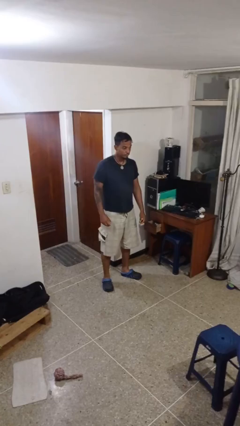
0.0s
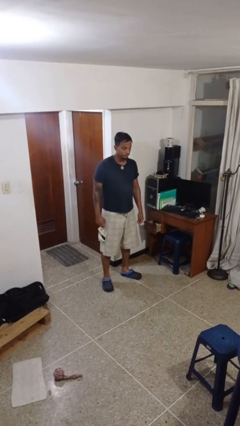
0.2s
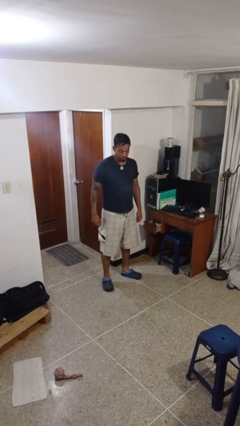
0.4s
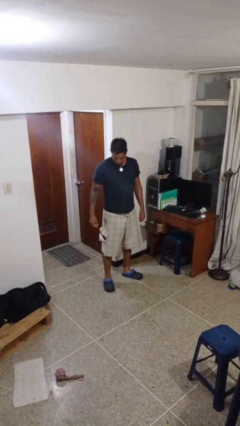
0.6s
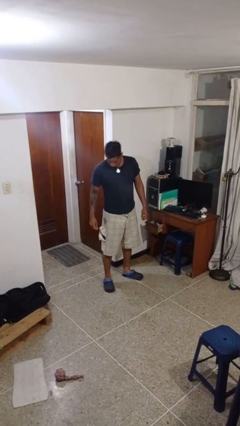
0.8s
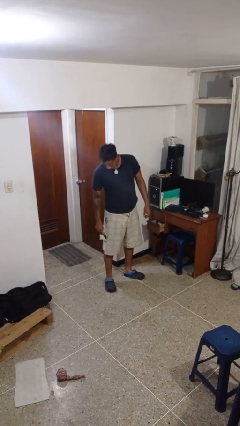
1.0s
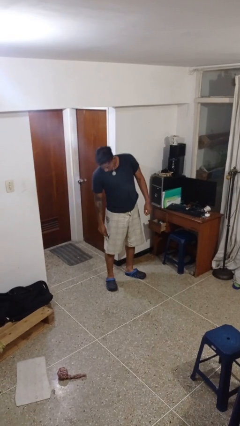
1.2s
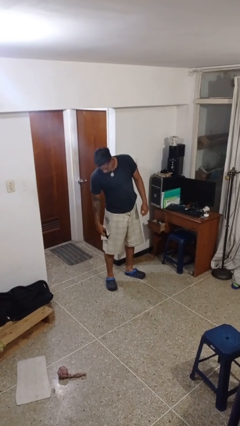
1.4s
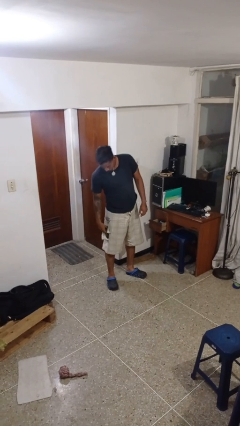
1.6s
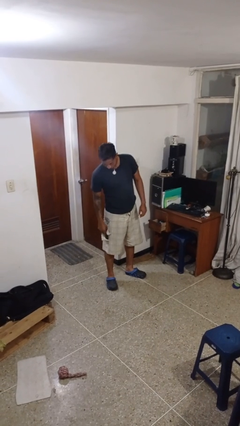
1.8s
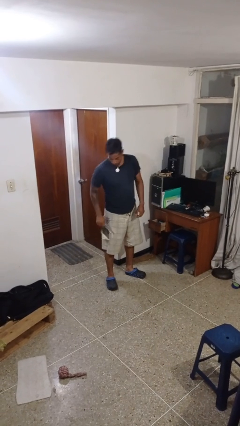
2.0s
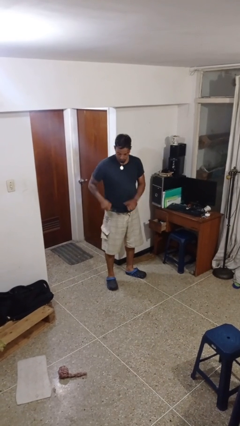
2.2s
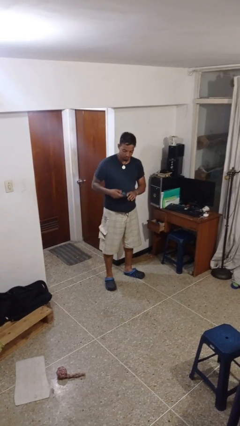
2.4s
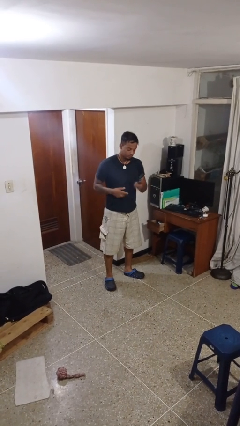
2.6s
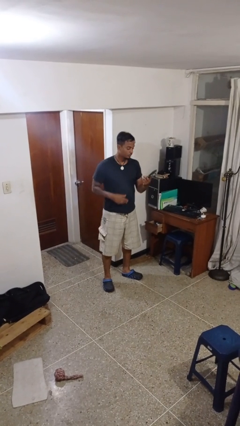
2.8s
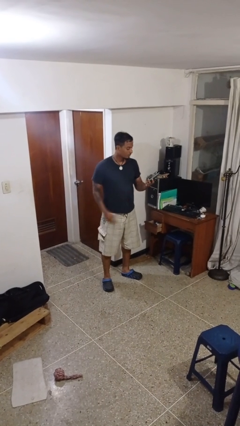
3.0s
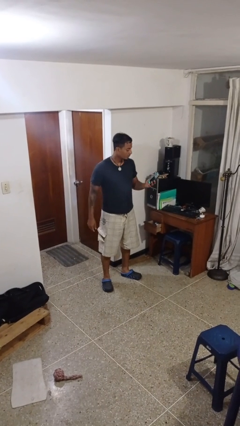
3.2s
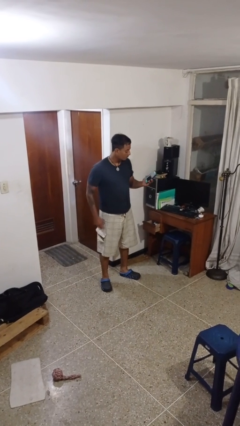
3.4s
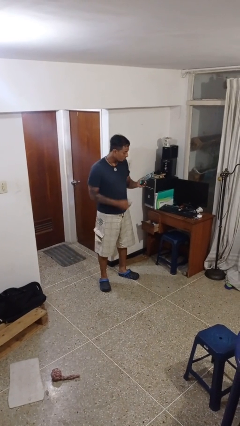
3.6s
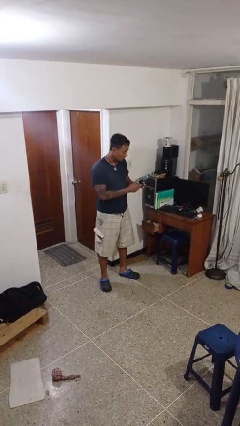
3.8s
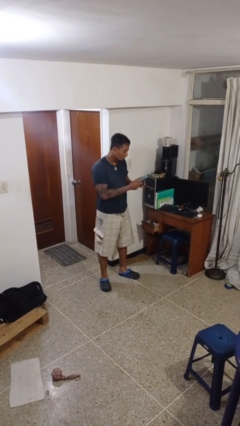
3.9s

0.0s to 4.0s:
person takes phone from pocket

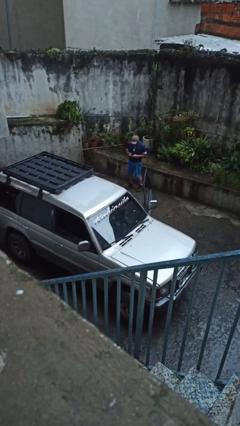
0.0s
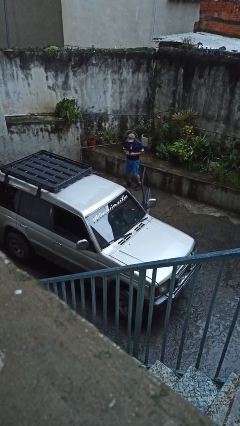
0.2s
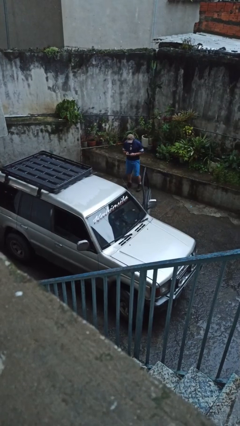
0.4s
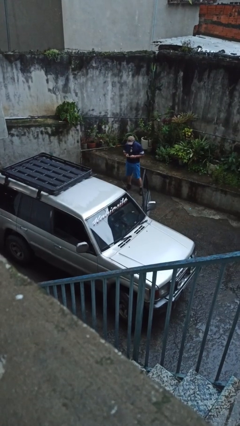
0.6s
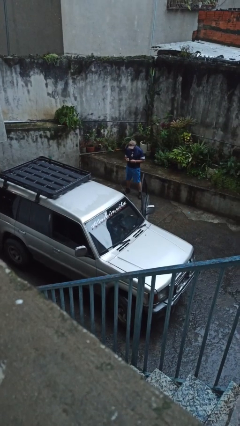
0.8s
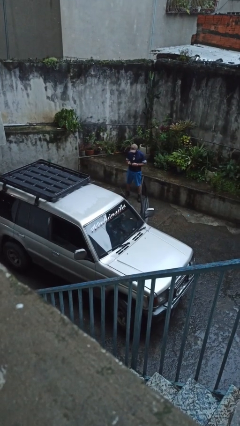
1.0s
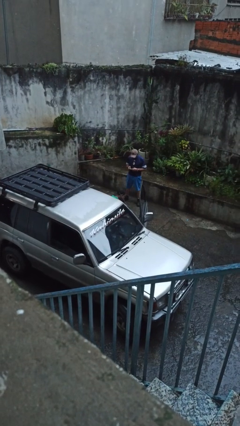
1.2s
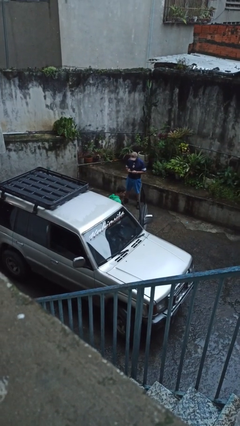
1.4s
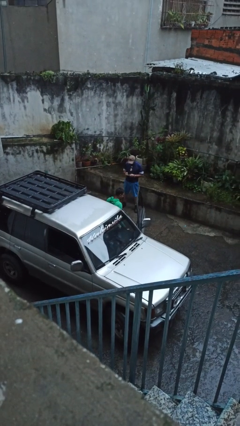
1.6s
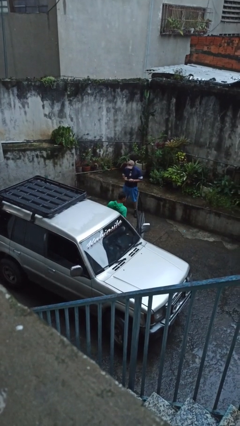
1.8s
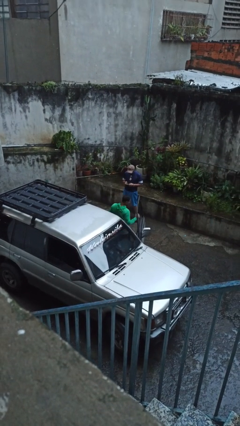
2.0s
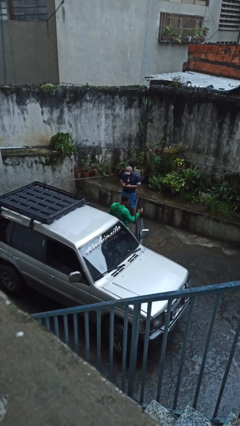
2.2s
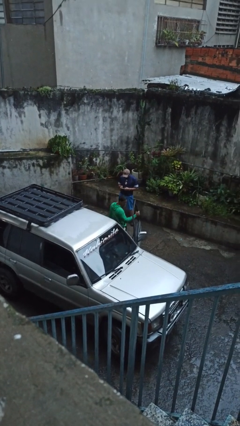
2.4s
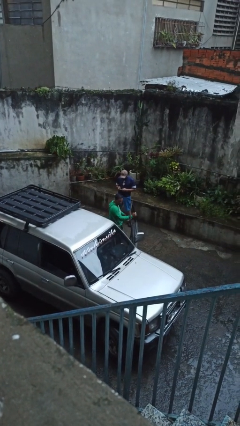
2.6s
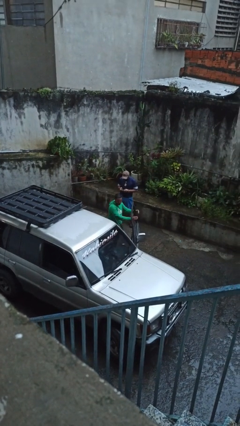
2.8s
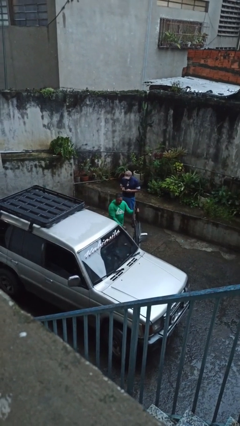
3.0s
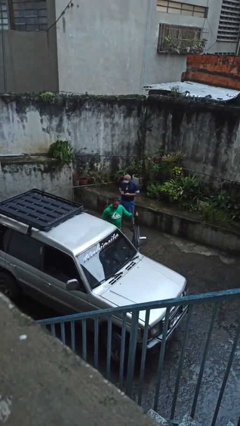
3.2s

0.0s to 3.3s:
person exits car

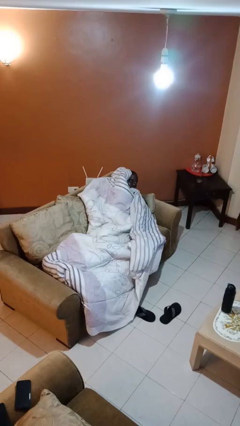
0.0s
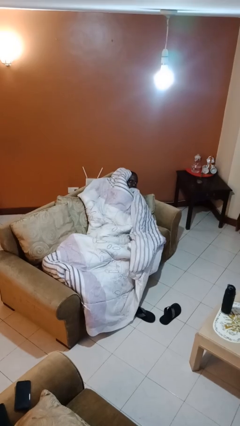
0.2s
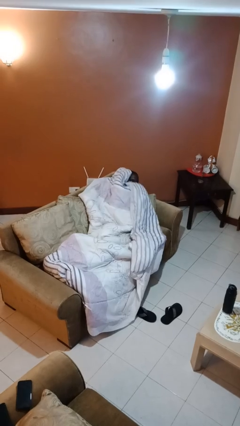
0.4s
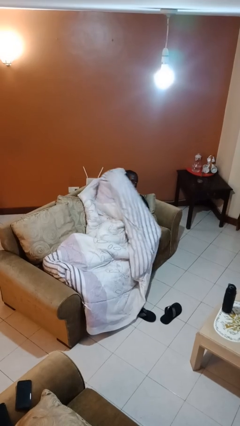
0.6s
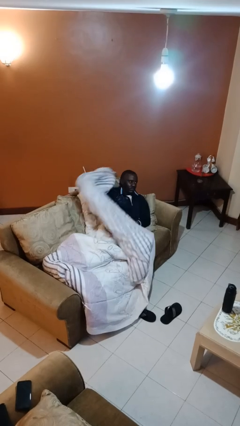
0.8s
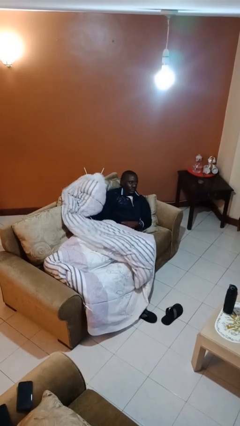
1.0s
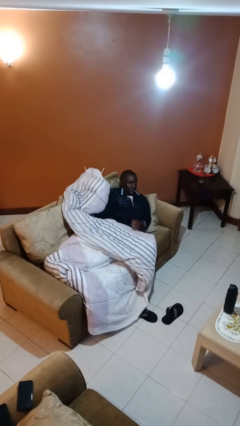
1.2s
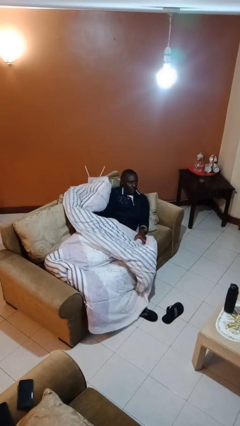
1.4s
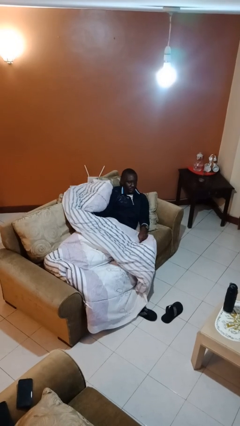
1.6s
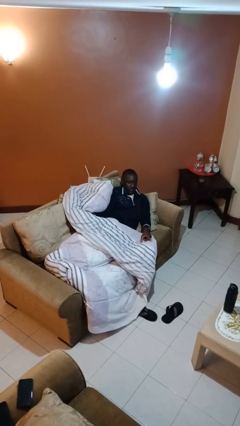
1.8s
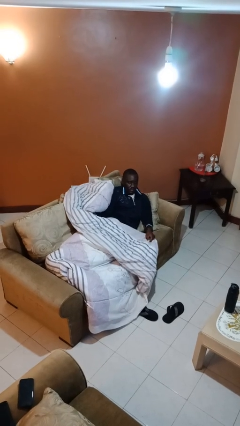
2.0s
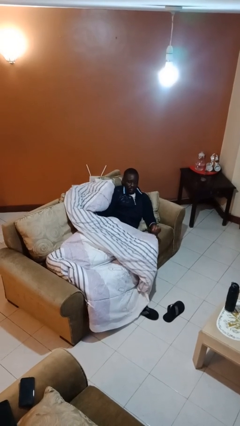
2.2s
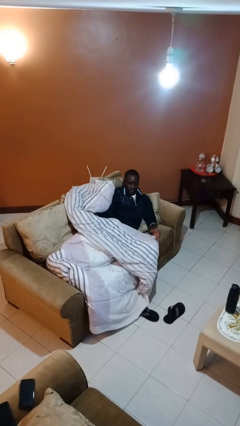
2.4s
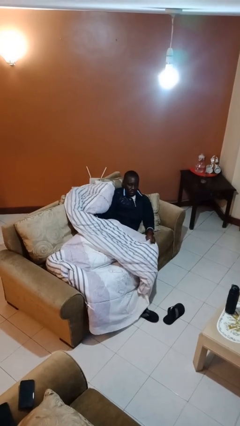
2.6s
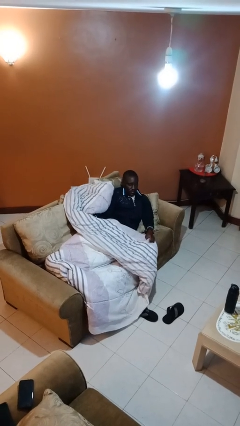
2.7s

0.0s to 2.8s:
person uncovers with blanket

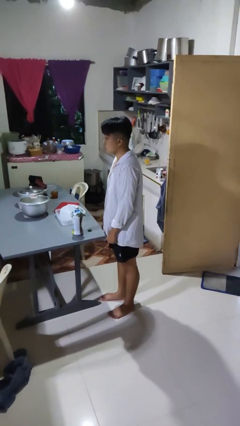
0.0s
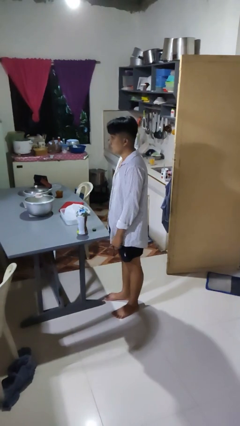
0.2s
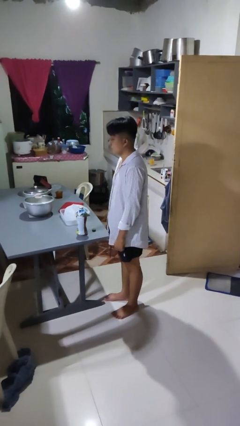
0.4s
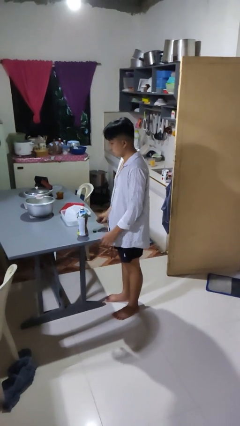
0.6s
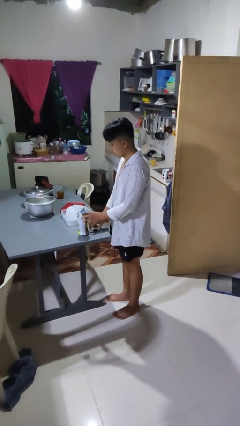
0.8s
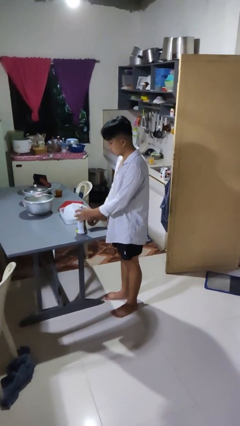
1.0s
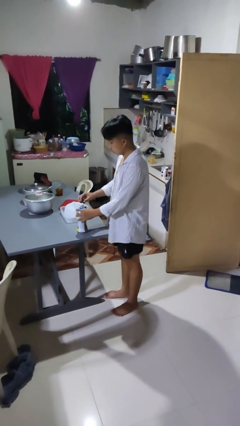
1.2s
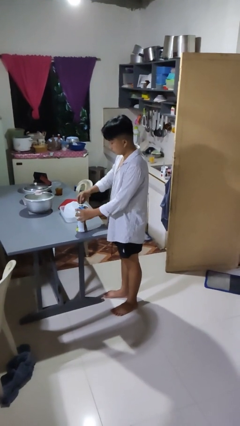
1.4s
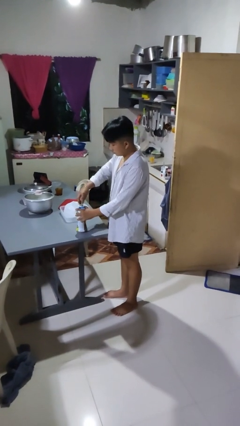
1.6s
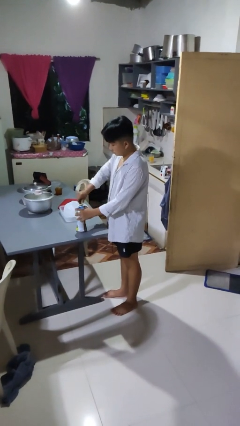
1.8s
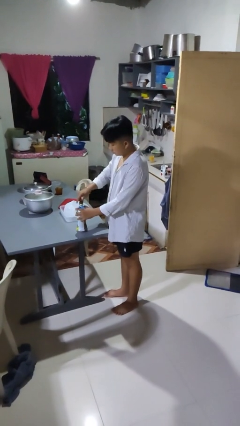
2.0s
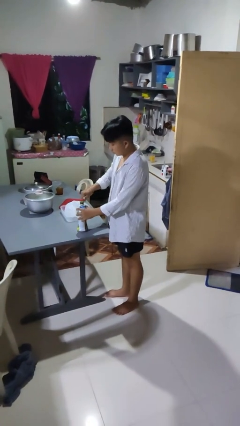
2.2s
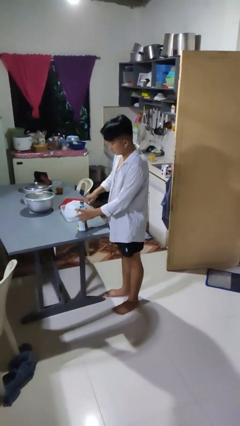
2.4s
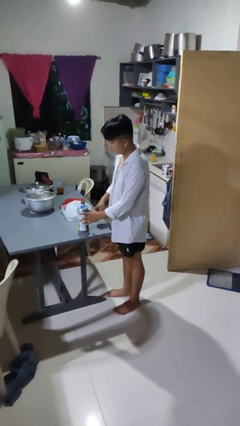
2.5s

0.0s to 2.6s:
person screws lid to bottle

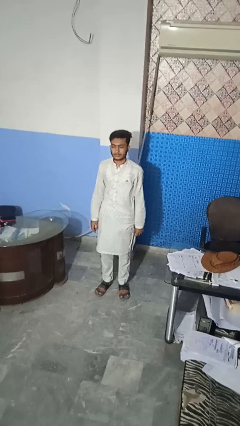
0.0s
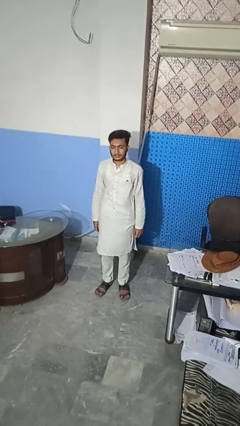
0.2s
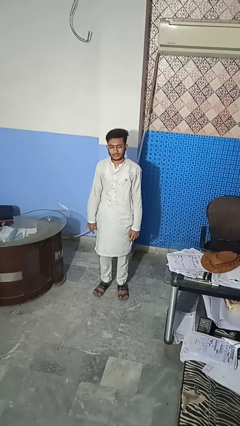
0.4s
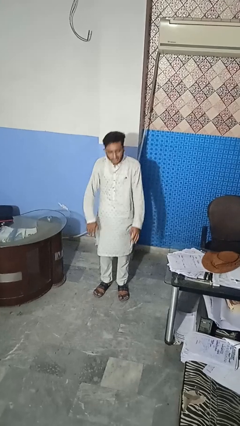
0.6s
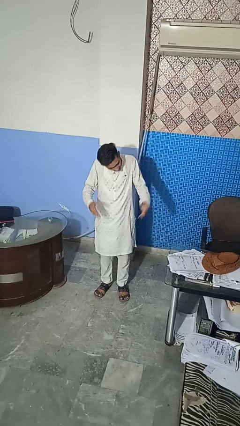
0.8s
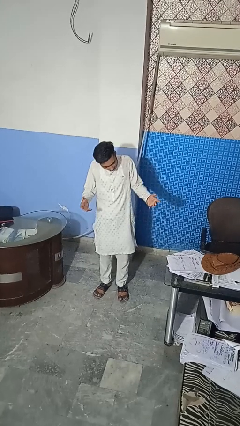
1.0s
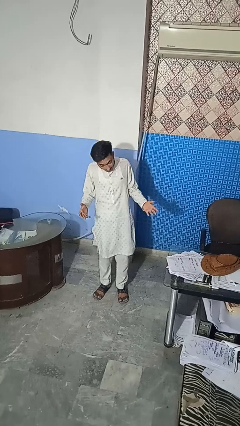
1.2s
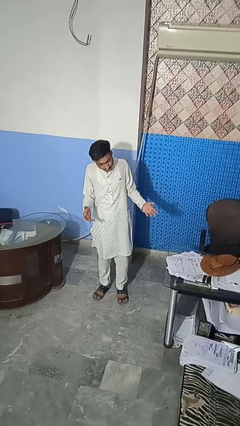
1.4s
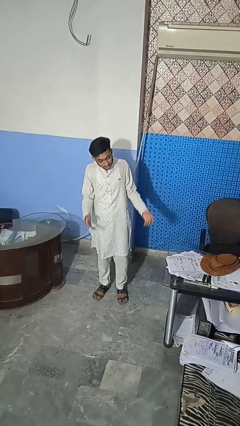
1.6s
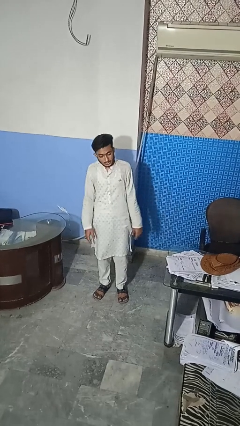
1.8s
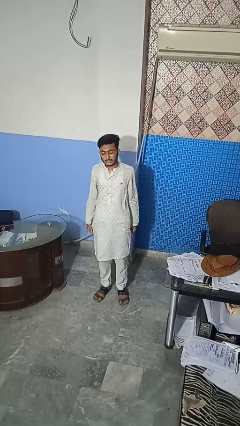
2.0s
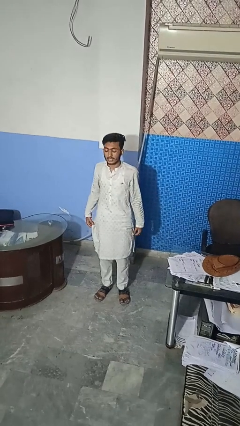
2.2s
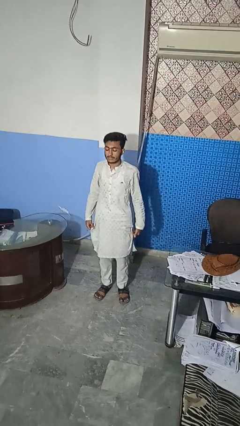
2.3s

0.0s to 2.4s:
person shrugs

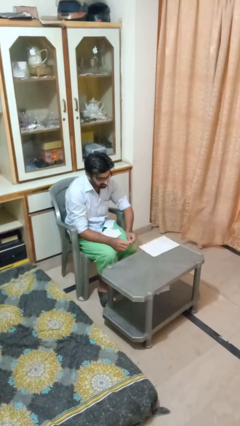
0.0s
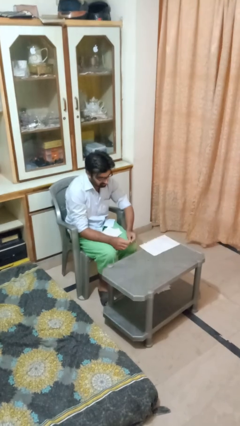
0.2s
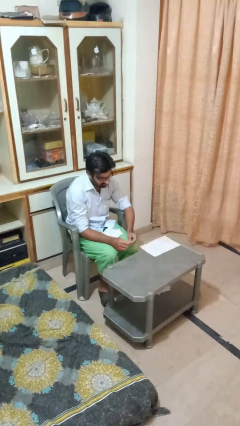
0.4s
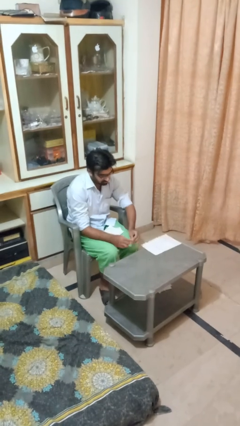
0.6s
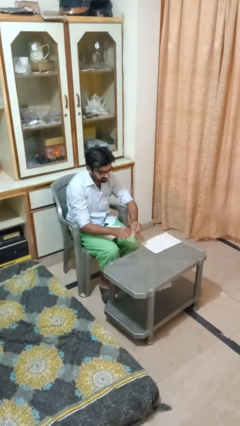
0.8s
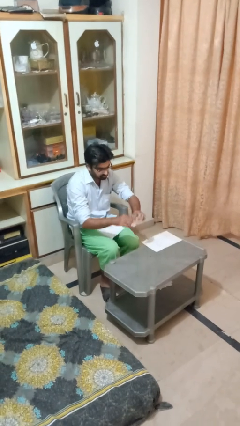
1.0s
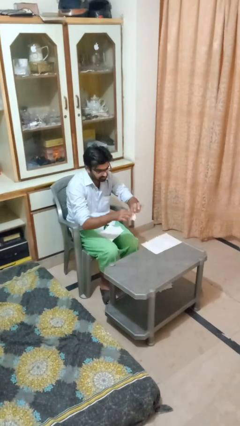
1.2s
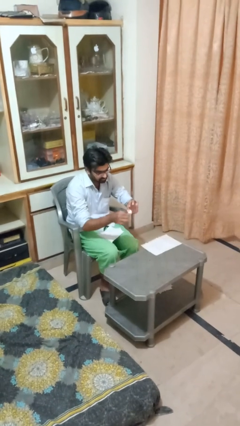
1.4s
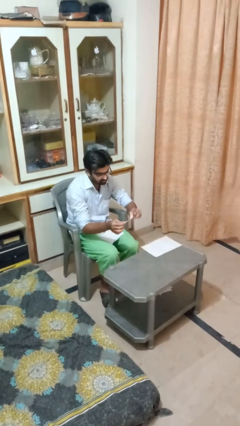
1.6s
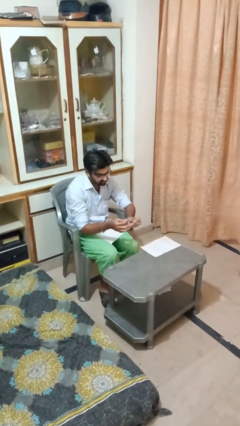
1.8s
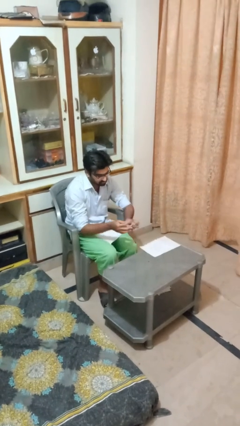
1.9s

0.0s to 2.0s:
person tears paper

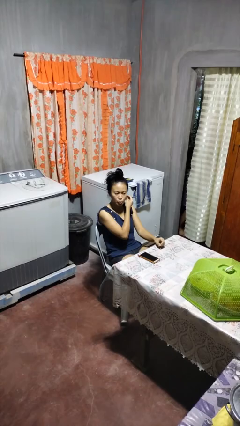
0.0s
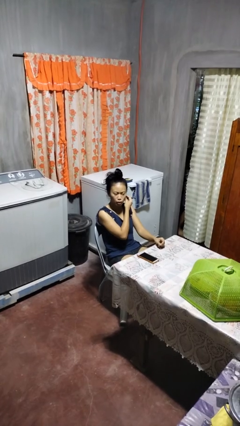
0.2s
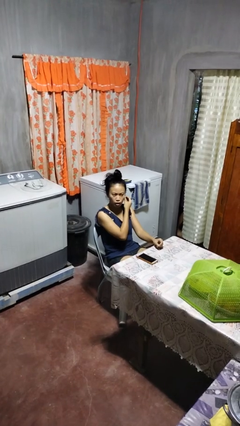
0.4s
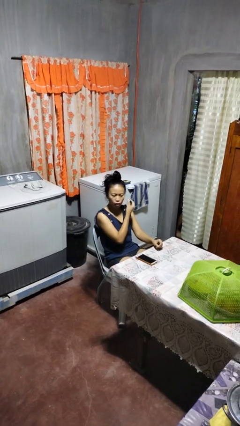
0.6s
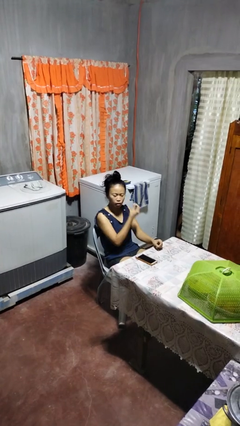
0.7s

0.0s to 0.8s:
person takes off earrings
